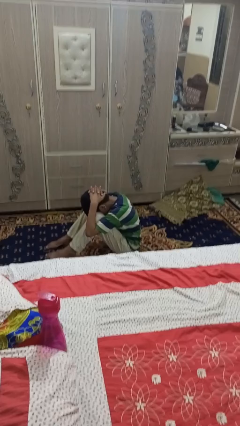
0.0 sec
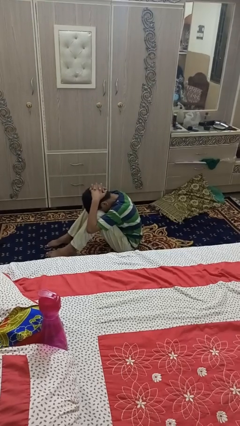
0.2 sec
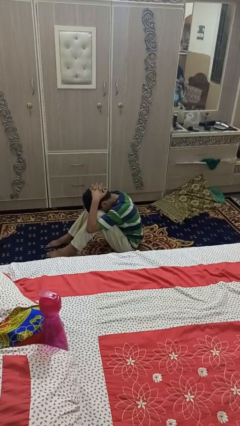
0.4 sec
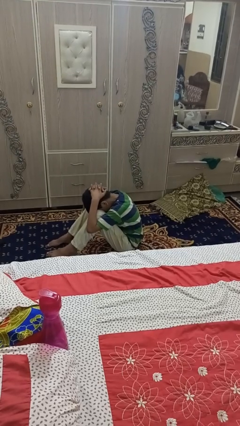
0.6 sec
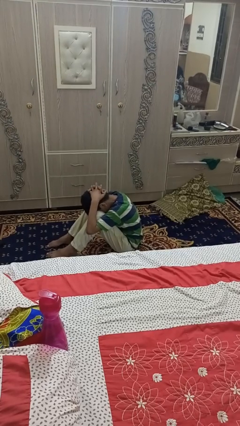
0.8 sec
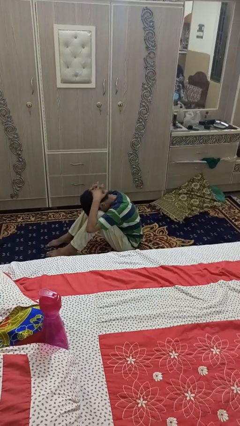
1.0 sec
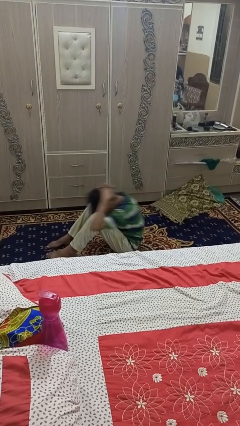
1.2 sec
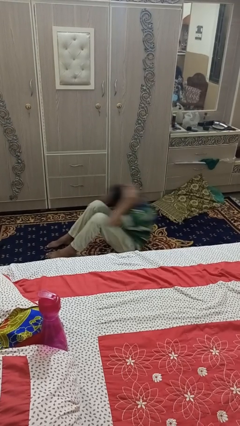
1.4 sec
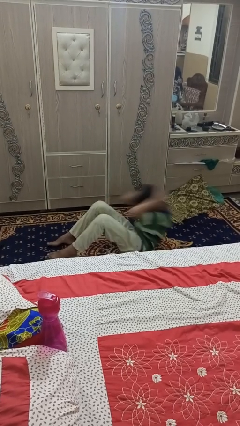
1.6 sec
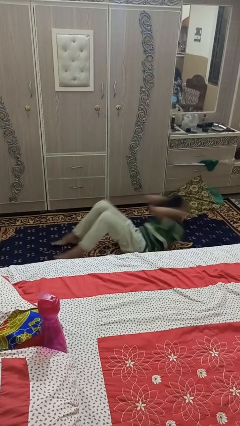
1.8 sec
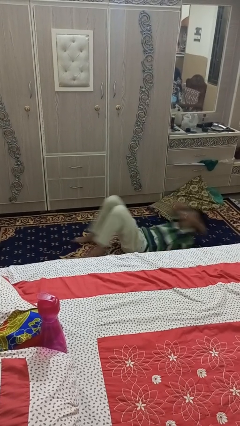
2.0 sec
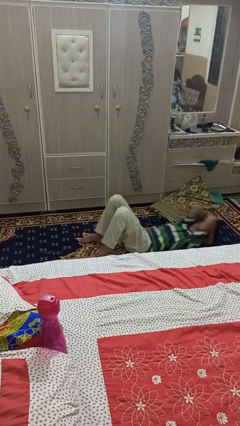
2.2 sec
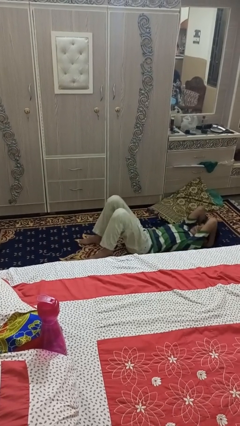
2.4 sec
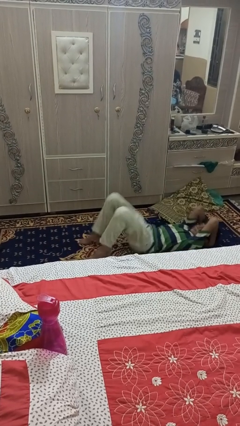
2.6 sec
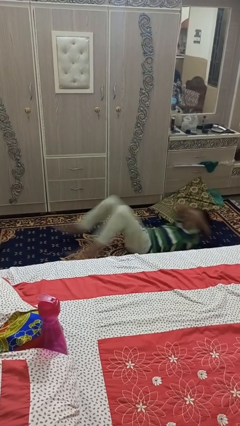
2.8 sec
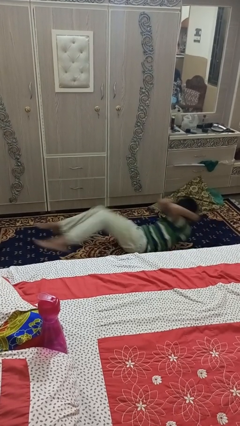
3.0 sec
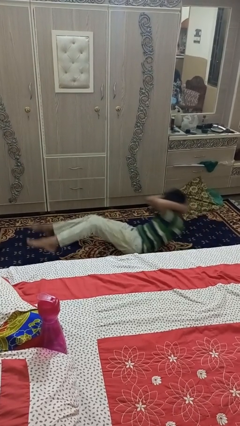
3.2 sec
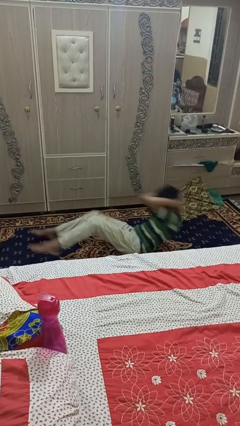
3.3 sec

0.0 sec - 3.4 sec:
person exercises with situp

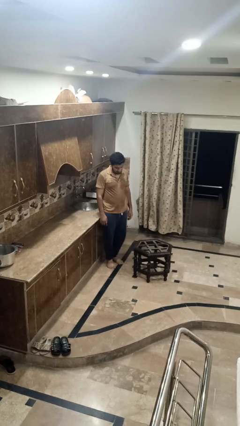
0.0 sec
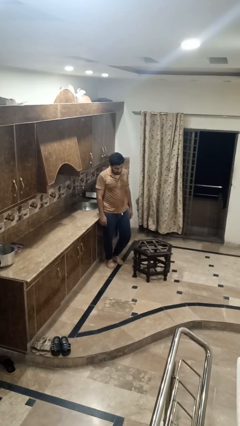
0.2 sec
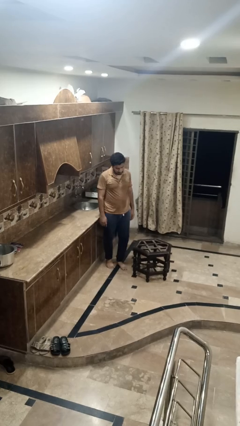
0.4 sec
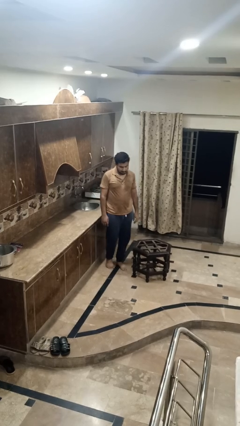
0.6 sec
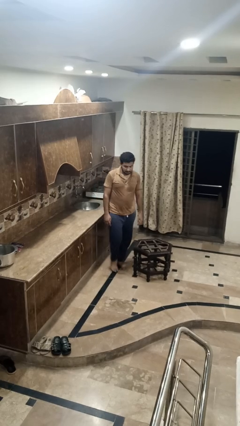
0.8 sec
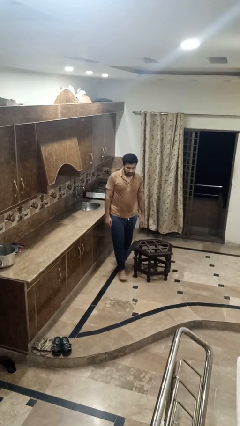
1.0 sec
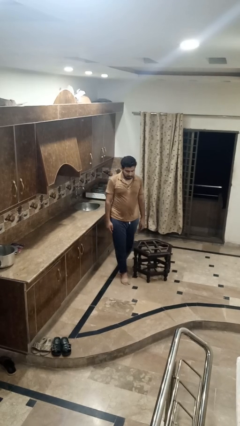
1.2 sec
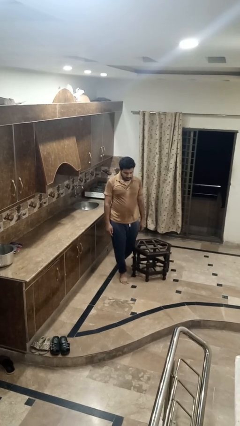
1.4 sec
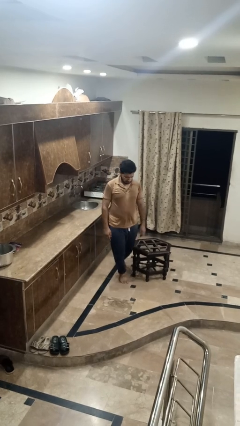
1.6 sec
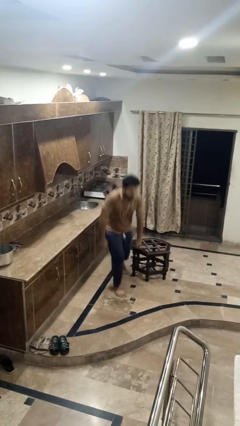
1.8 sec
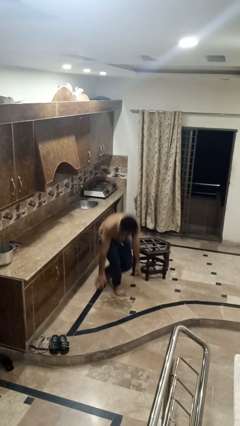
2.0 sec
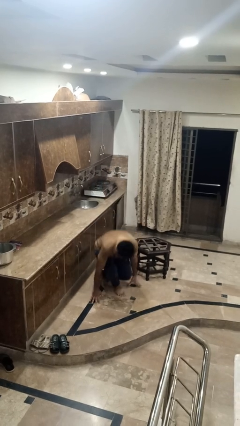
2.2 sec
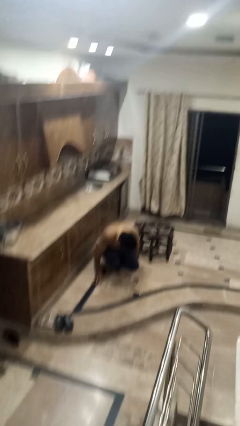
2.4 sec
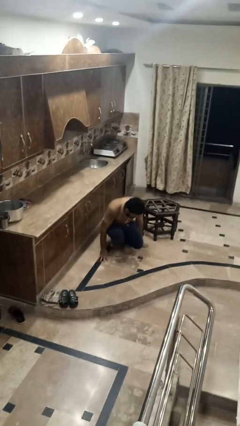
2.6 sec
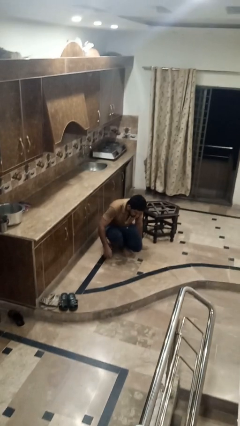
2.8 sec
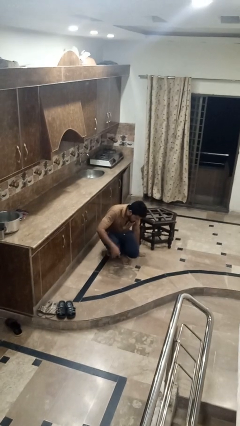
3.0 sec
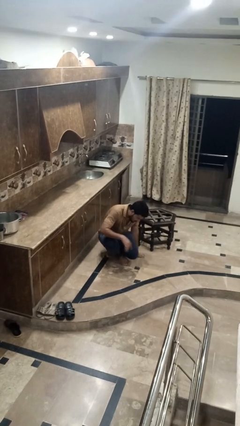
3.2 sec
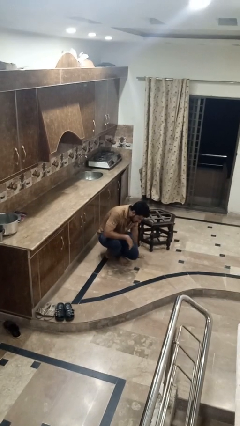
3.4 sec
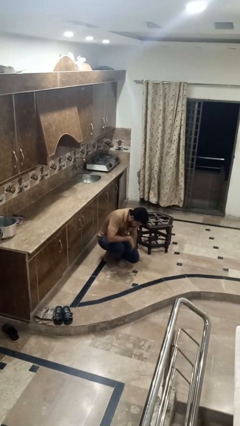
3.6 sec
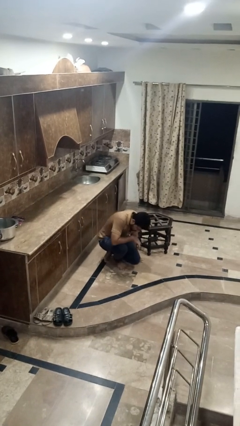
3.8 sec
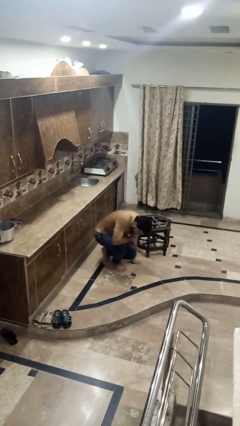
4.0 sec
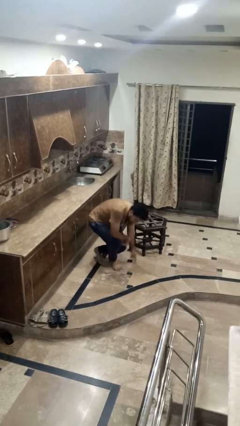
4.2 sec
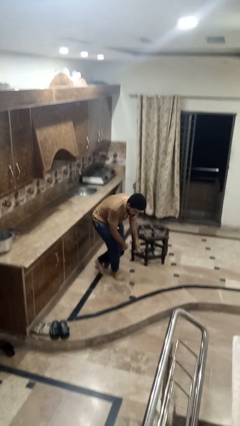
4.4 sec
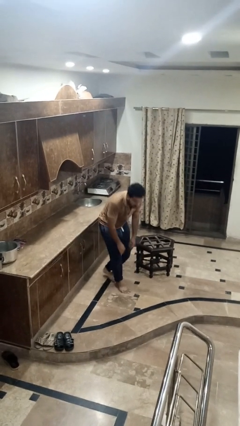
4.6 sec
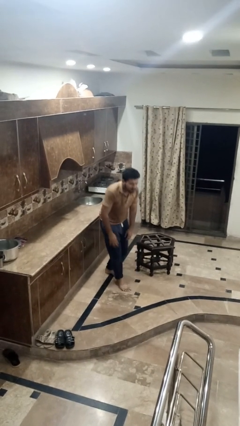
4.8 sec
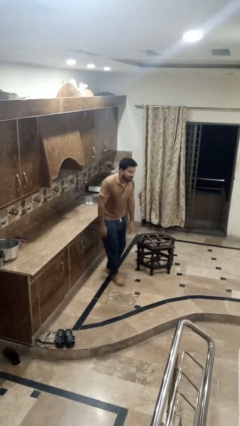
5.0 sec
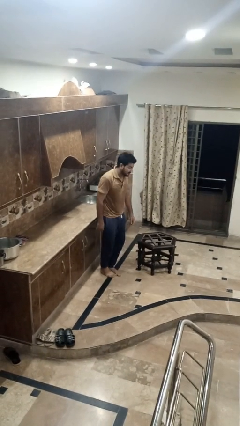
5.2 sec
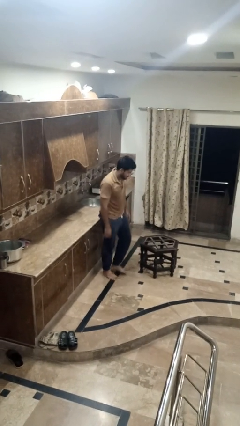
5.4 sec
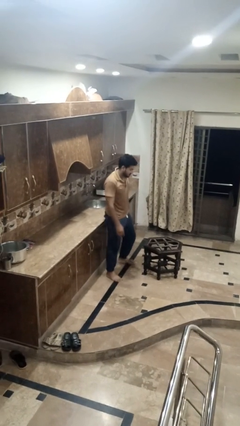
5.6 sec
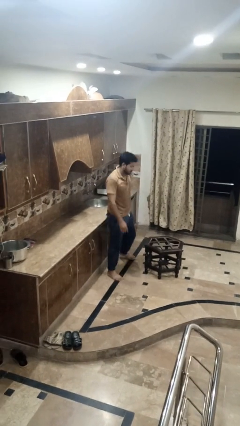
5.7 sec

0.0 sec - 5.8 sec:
person bumps into table

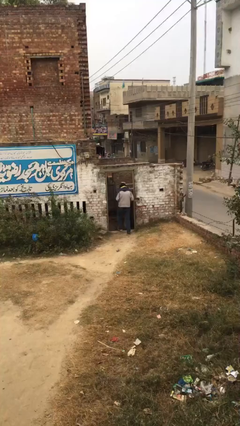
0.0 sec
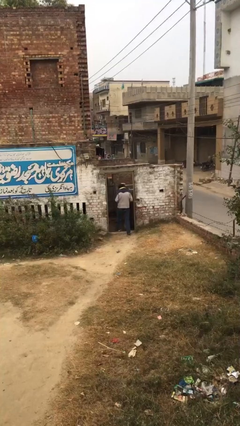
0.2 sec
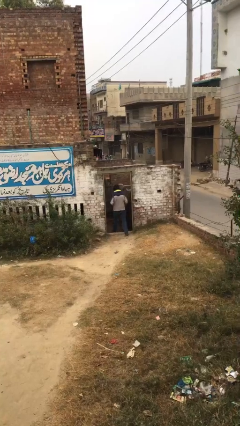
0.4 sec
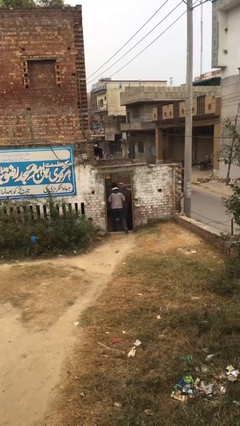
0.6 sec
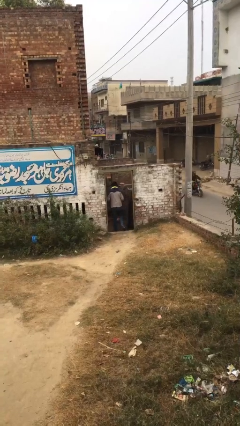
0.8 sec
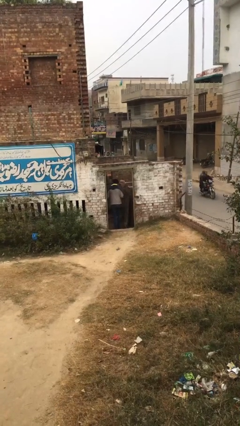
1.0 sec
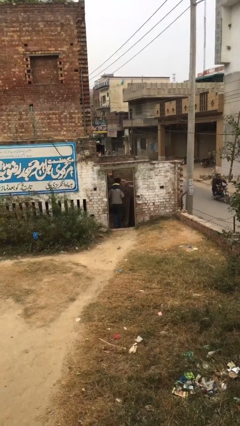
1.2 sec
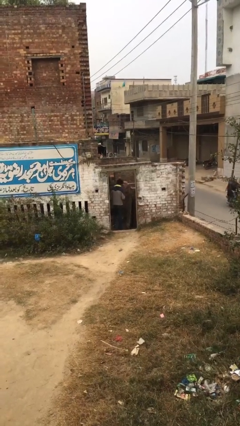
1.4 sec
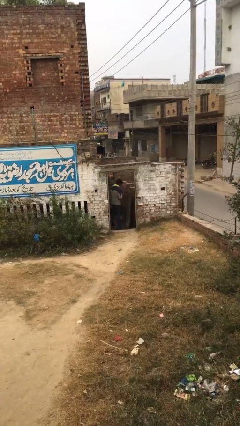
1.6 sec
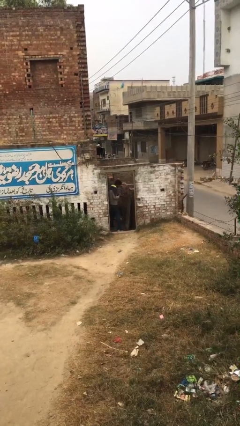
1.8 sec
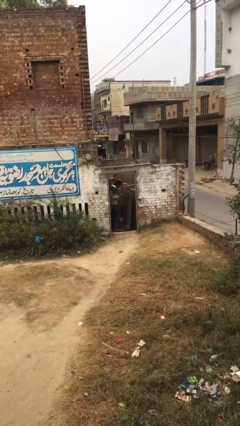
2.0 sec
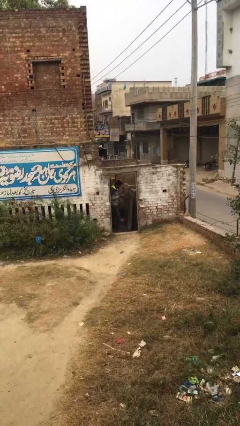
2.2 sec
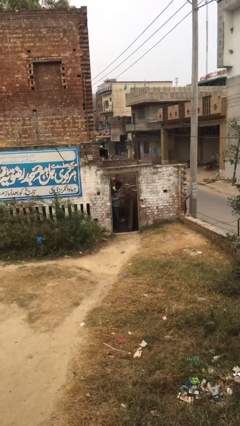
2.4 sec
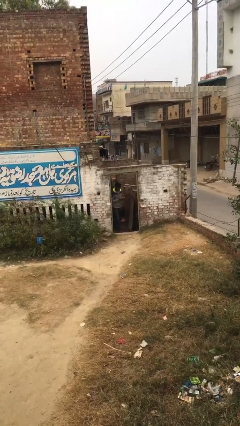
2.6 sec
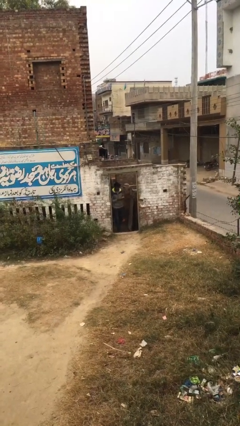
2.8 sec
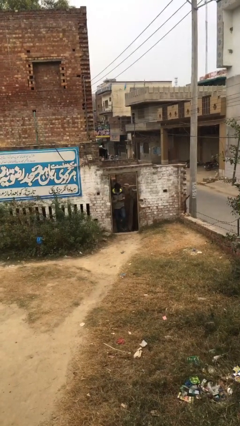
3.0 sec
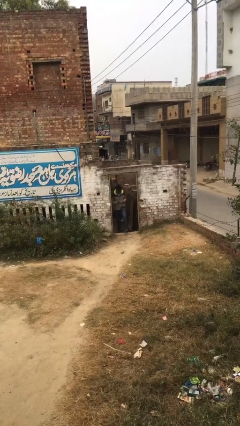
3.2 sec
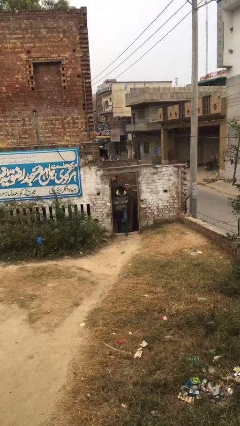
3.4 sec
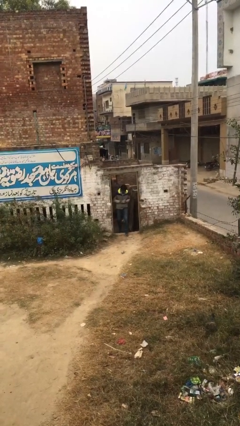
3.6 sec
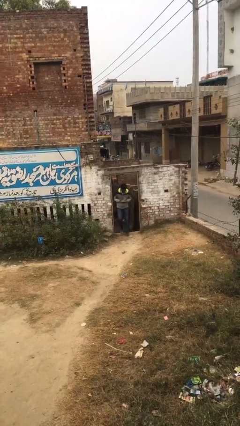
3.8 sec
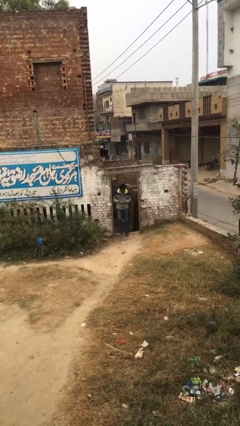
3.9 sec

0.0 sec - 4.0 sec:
person enters scene through structure

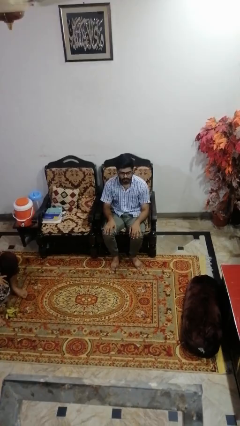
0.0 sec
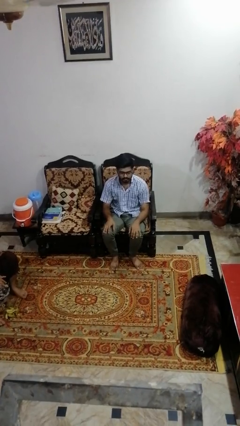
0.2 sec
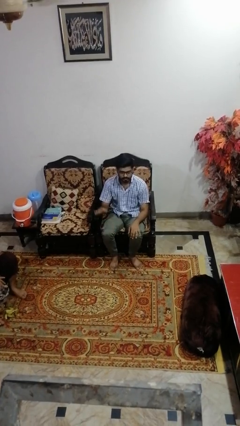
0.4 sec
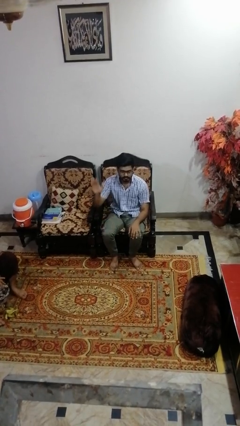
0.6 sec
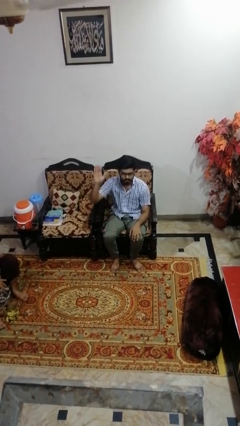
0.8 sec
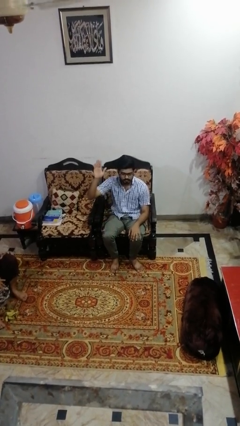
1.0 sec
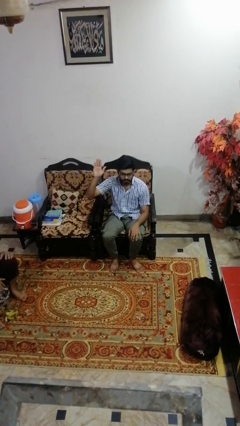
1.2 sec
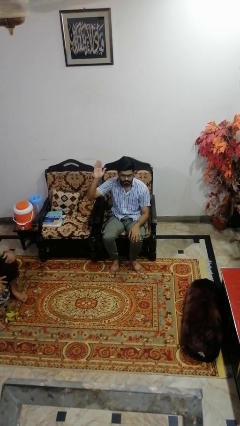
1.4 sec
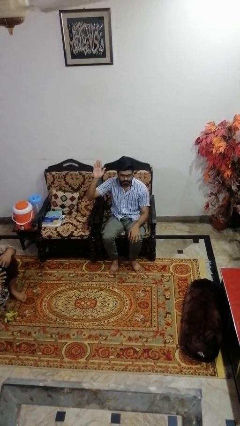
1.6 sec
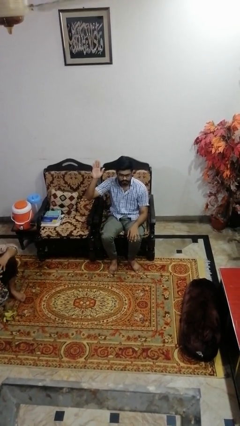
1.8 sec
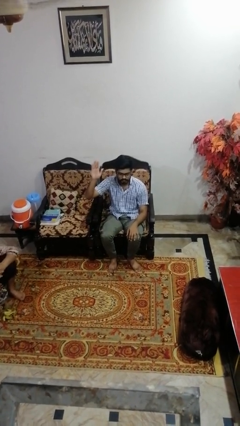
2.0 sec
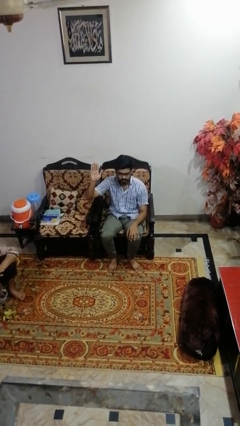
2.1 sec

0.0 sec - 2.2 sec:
person gestures raise hand

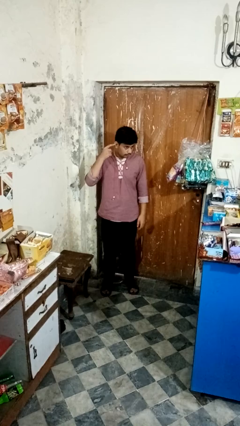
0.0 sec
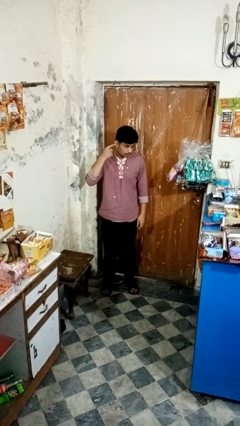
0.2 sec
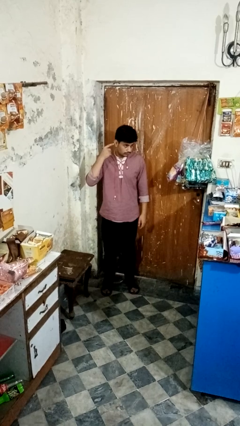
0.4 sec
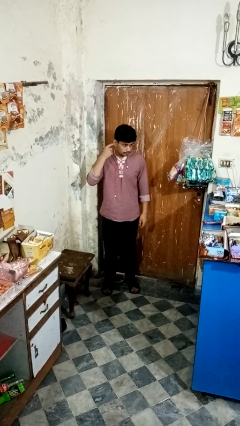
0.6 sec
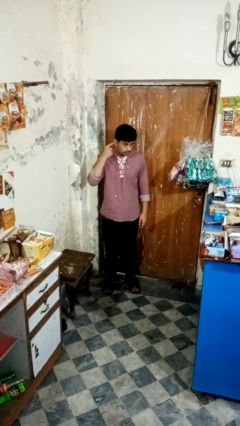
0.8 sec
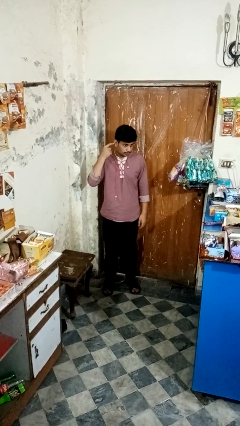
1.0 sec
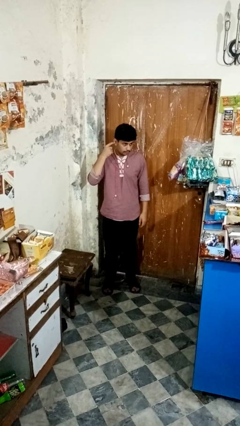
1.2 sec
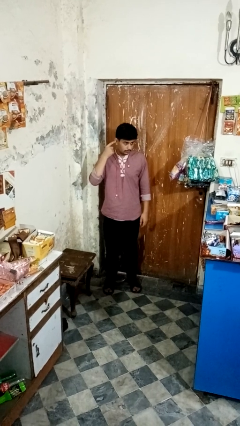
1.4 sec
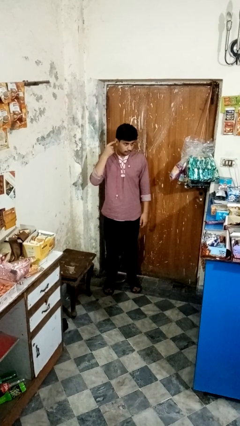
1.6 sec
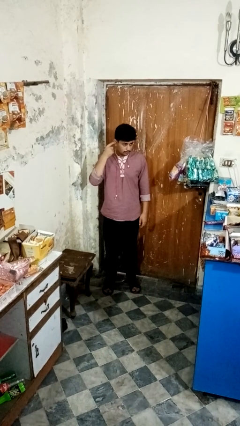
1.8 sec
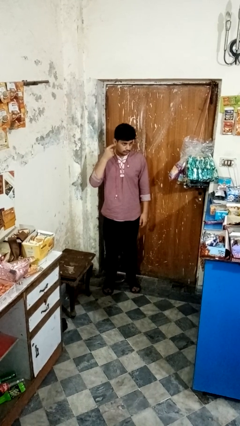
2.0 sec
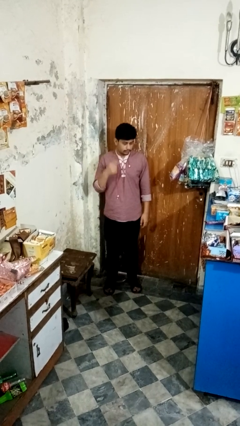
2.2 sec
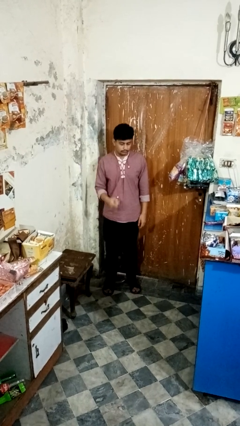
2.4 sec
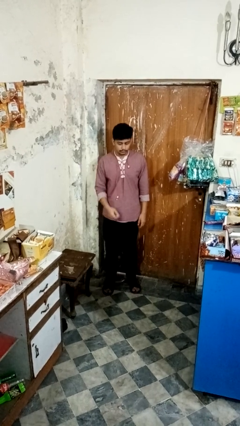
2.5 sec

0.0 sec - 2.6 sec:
person gestures listen closely
